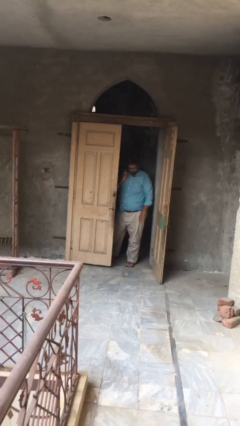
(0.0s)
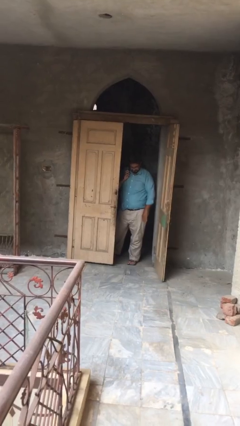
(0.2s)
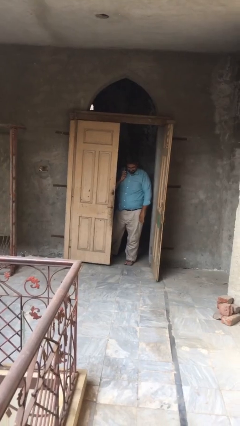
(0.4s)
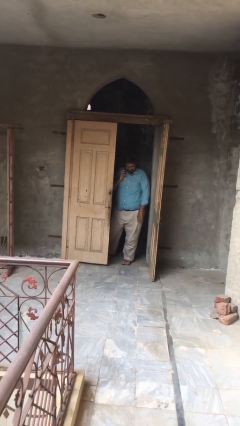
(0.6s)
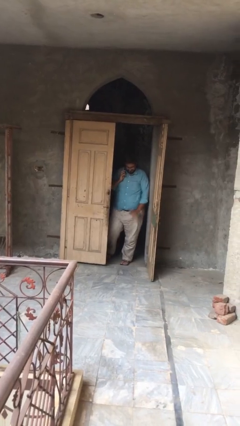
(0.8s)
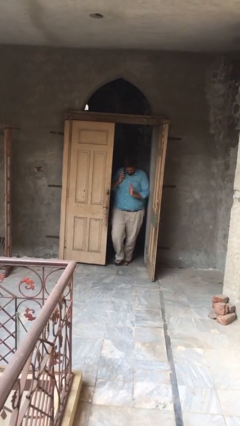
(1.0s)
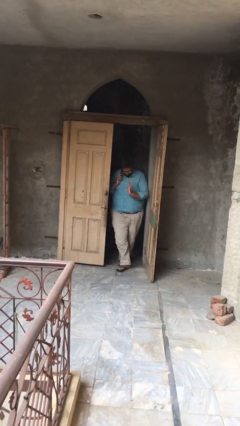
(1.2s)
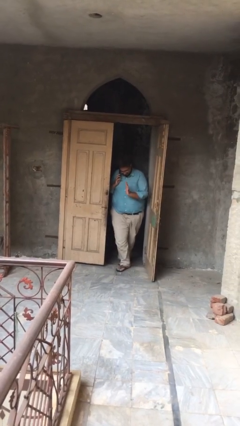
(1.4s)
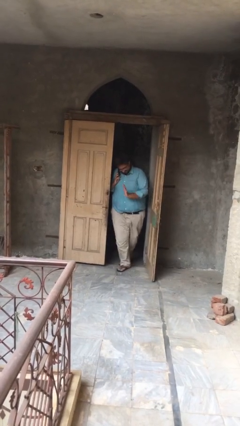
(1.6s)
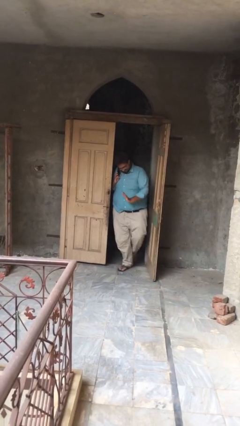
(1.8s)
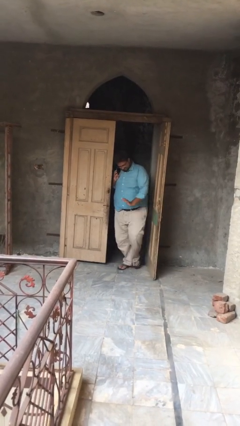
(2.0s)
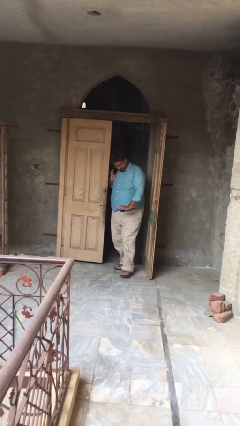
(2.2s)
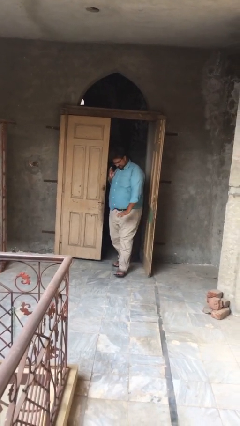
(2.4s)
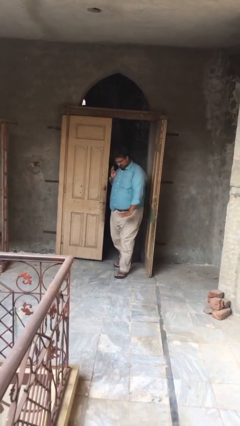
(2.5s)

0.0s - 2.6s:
person enters scene through structure

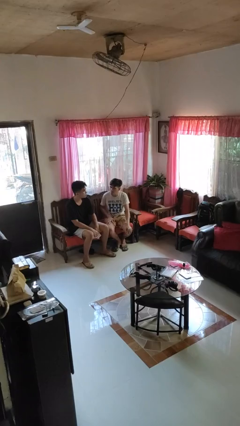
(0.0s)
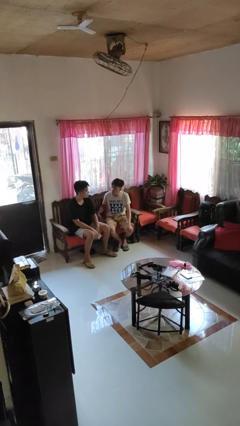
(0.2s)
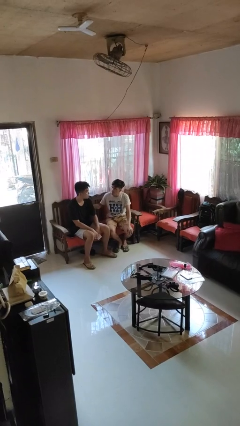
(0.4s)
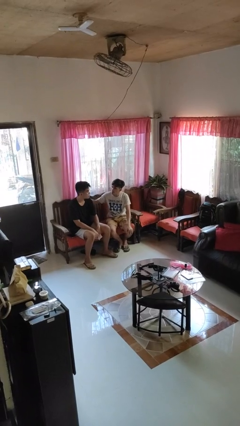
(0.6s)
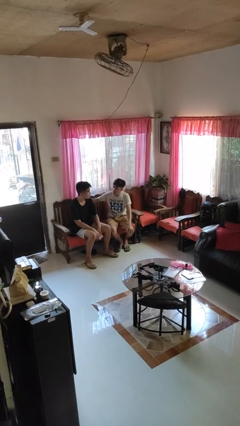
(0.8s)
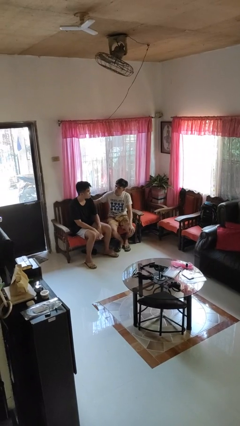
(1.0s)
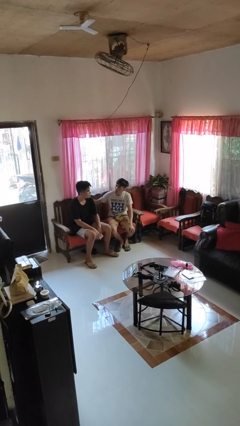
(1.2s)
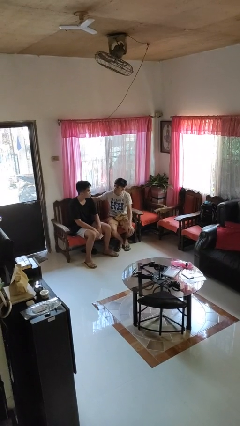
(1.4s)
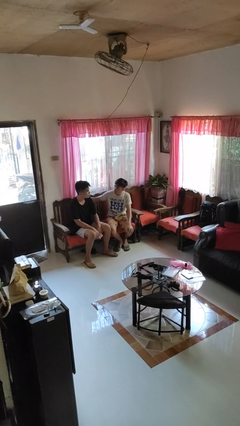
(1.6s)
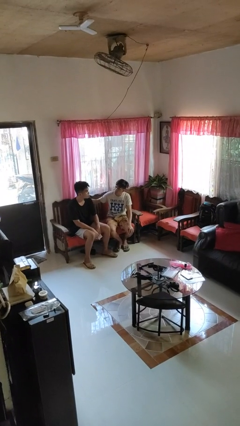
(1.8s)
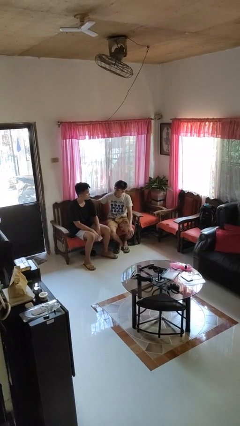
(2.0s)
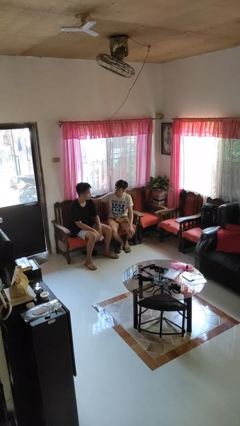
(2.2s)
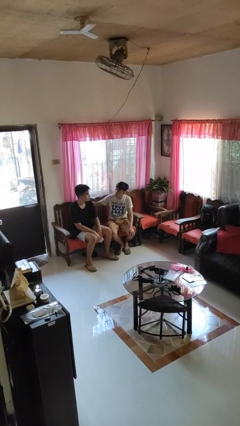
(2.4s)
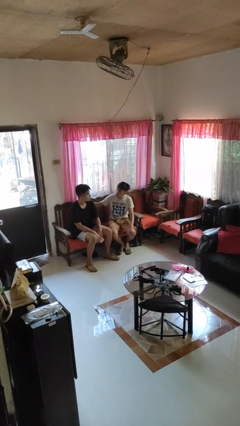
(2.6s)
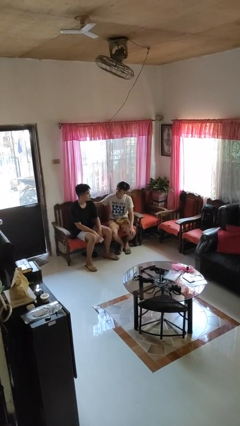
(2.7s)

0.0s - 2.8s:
person touches back of person

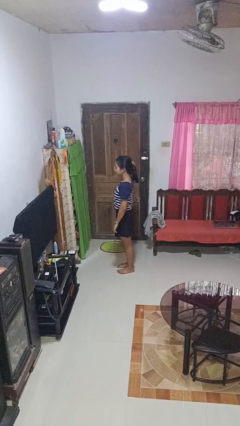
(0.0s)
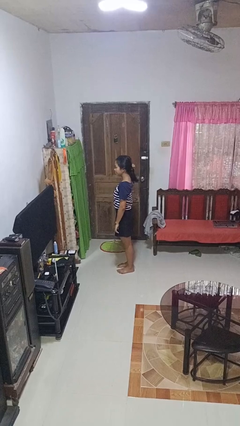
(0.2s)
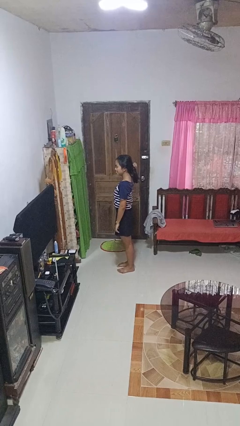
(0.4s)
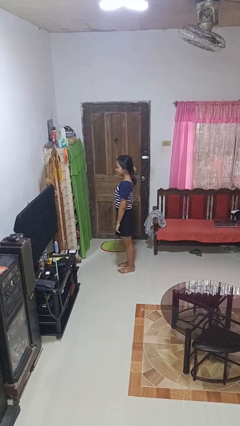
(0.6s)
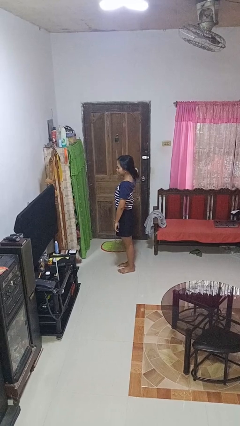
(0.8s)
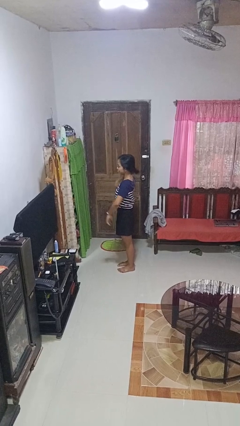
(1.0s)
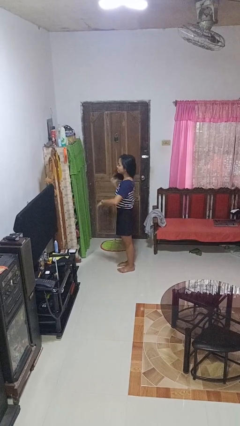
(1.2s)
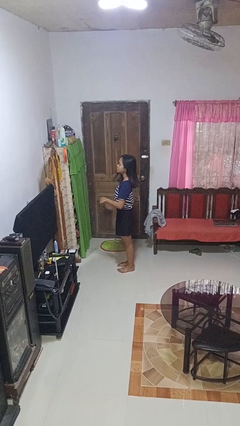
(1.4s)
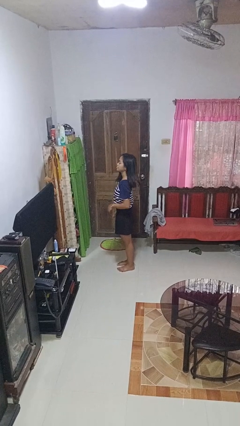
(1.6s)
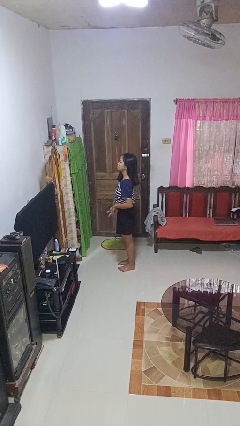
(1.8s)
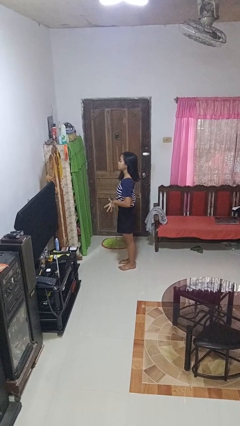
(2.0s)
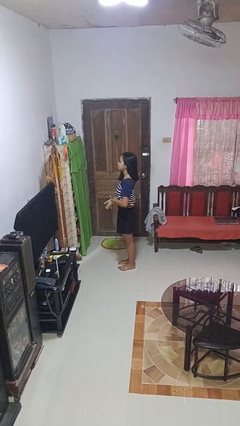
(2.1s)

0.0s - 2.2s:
person takes off hairtie

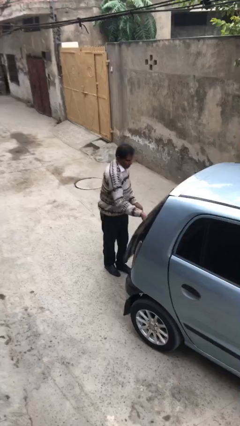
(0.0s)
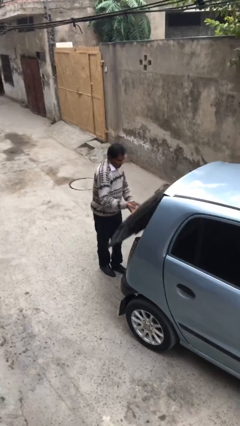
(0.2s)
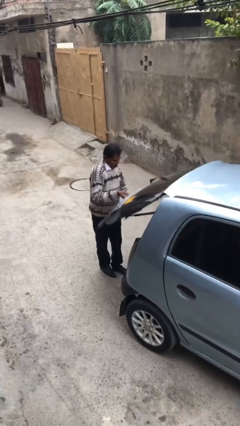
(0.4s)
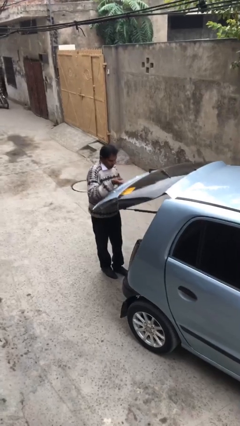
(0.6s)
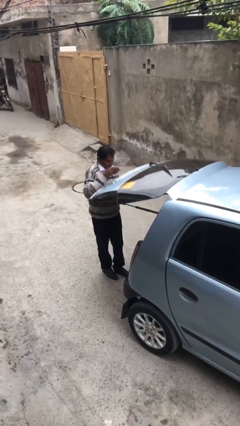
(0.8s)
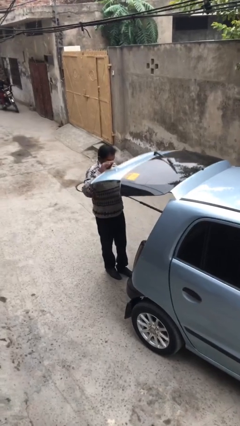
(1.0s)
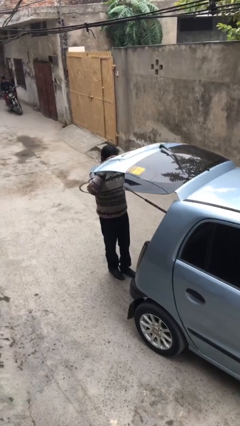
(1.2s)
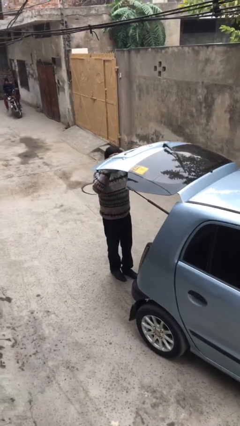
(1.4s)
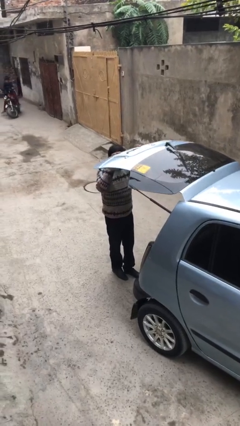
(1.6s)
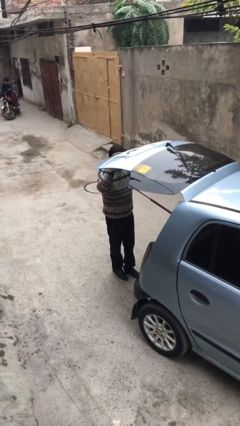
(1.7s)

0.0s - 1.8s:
person opens car trunk

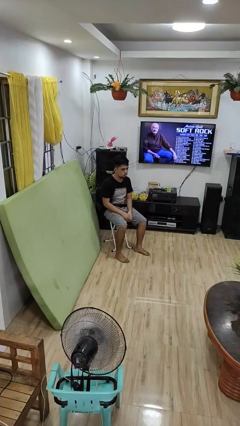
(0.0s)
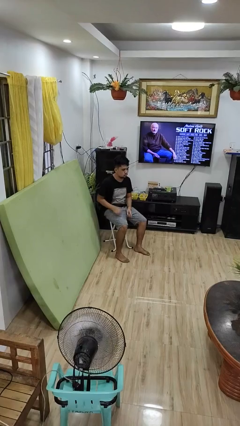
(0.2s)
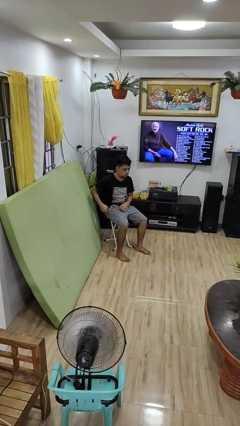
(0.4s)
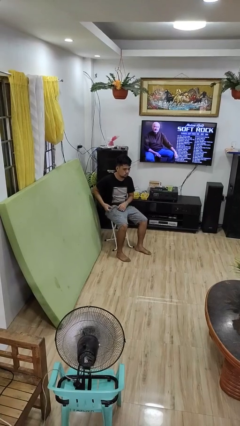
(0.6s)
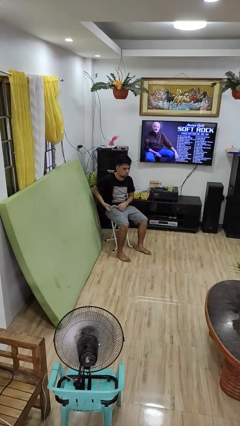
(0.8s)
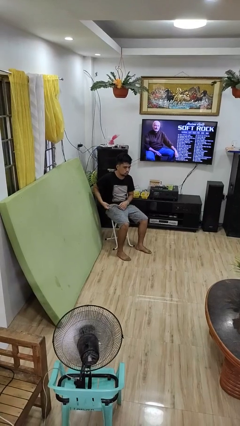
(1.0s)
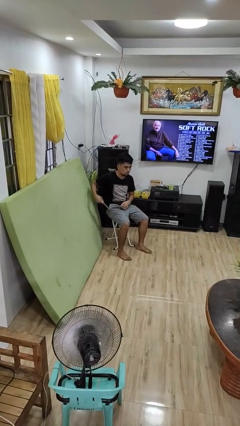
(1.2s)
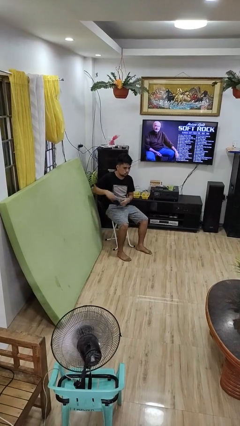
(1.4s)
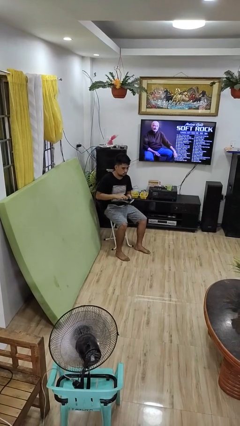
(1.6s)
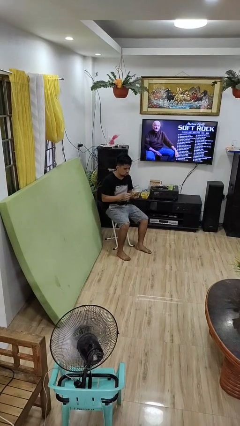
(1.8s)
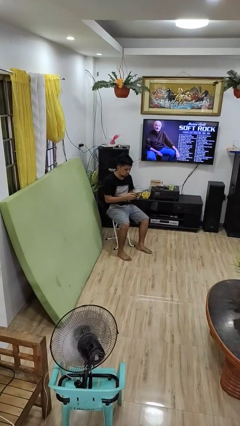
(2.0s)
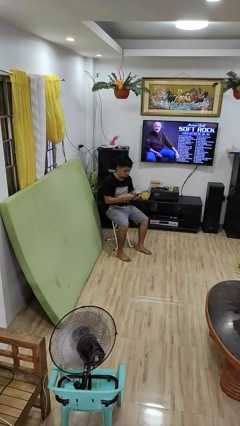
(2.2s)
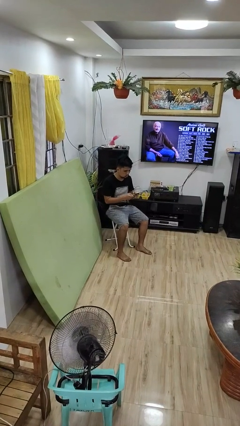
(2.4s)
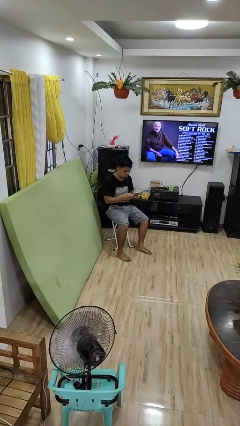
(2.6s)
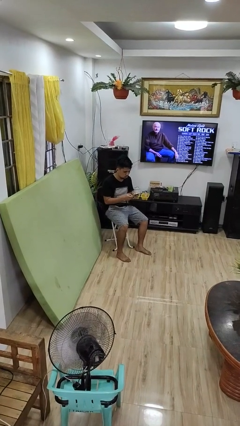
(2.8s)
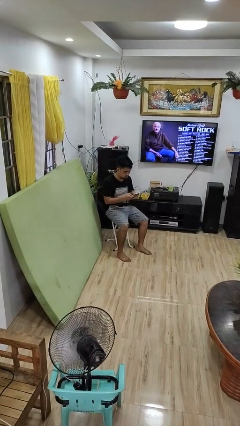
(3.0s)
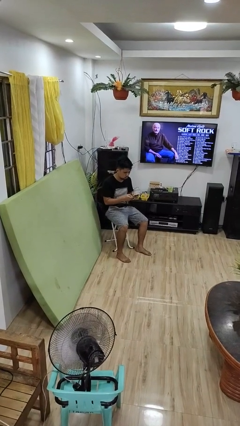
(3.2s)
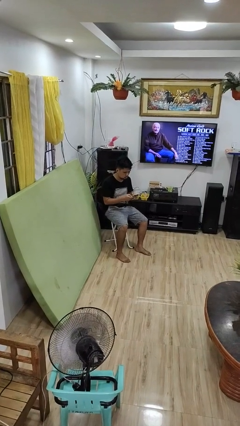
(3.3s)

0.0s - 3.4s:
person takes phone from pocket

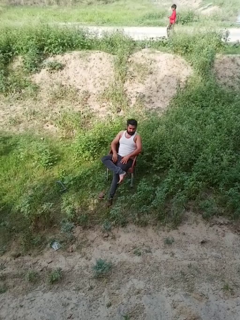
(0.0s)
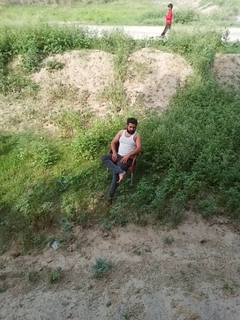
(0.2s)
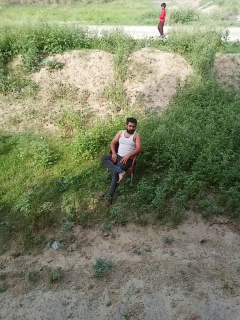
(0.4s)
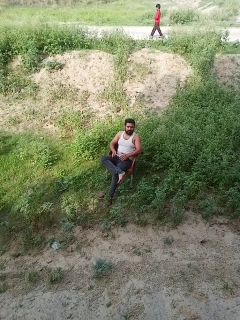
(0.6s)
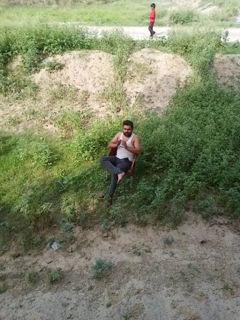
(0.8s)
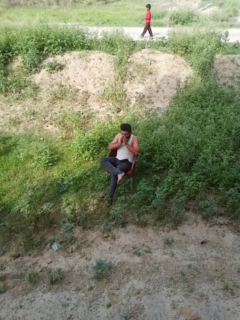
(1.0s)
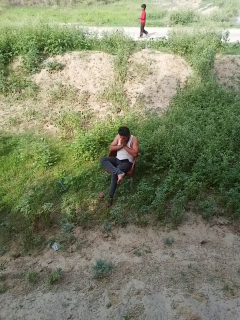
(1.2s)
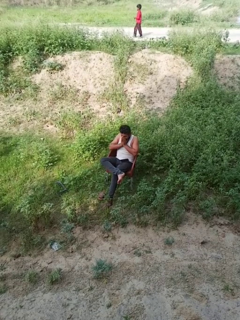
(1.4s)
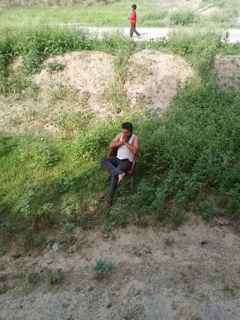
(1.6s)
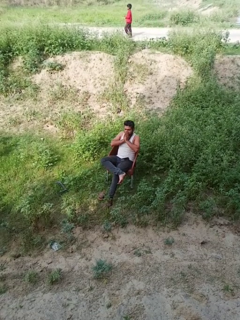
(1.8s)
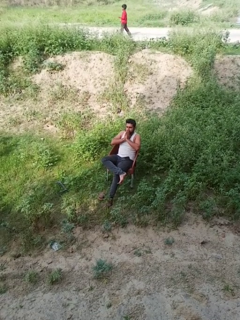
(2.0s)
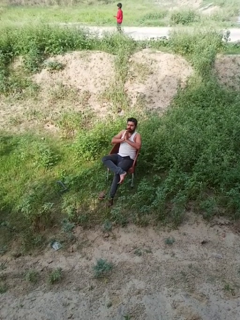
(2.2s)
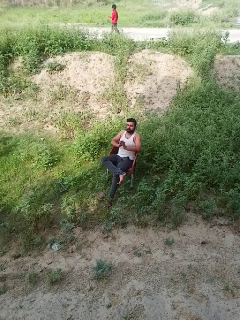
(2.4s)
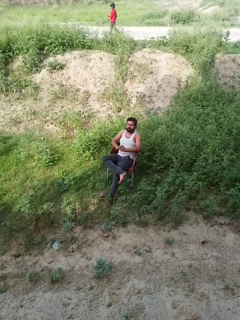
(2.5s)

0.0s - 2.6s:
person sneezes into hand

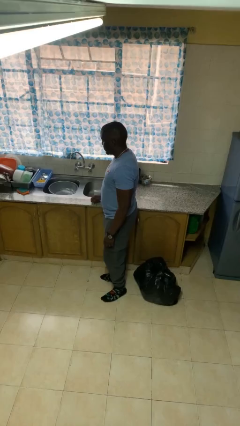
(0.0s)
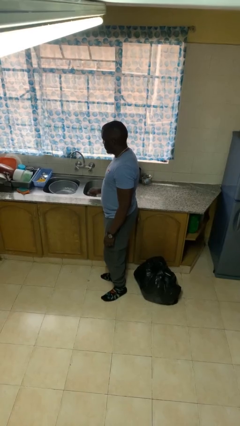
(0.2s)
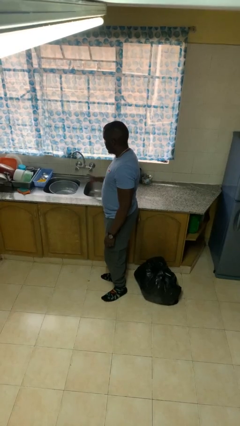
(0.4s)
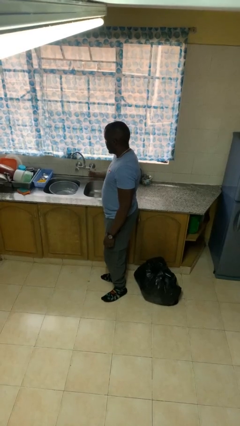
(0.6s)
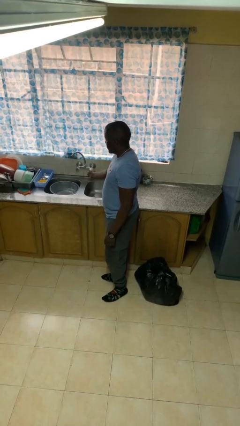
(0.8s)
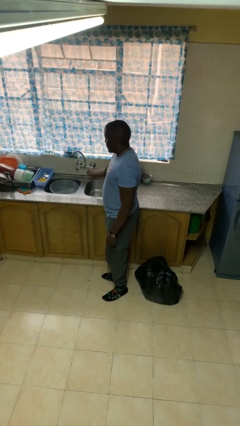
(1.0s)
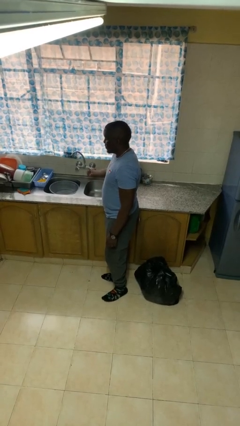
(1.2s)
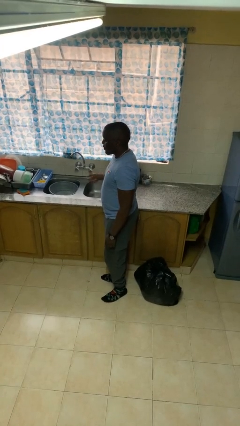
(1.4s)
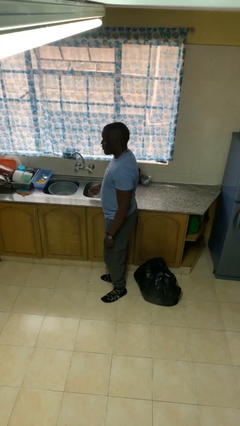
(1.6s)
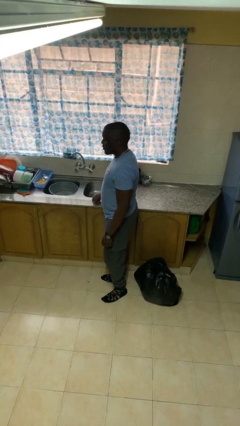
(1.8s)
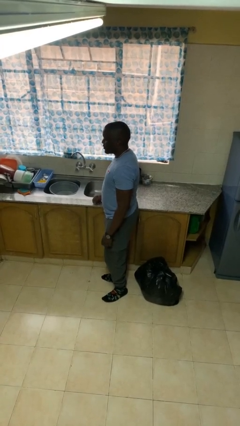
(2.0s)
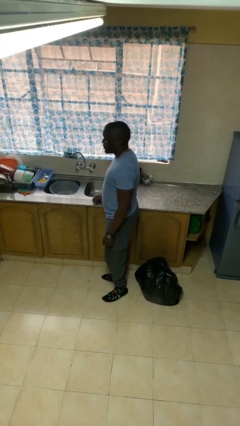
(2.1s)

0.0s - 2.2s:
person turns off faucet

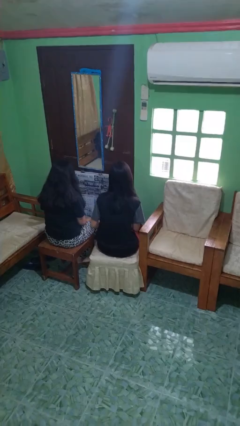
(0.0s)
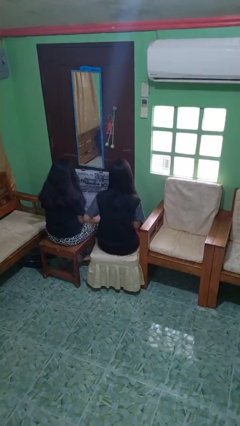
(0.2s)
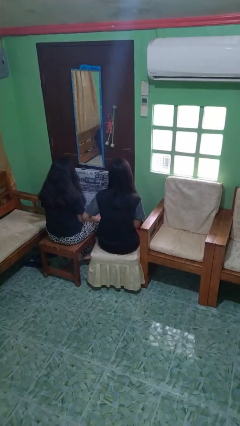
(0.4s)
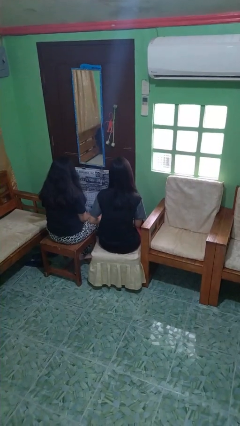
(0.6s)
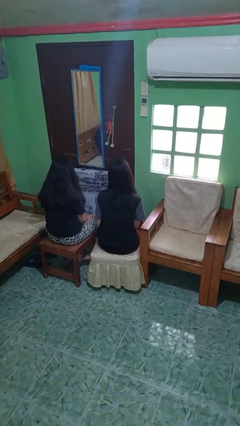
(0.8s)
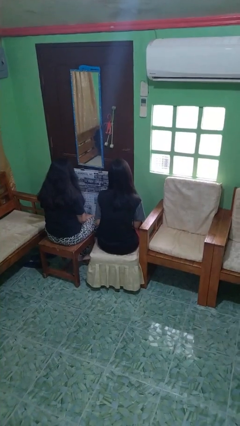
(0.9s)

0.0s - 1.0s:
person nudges person with elbow
